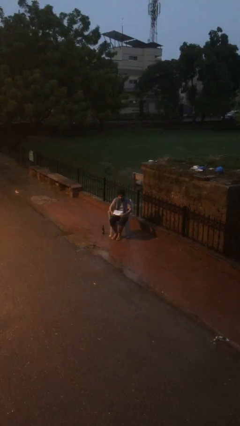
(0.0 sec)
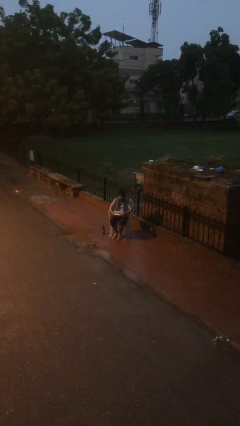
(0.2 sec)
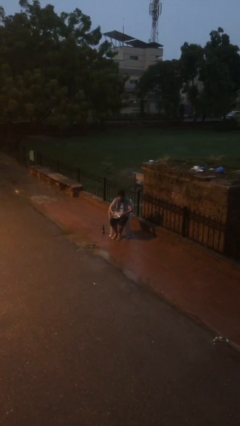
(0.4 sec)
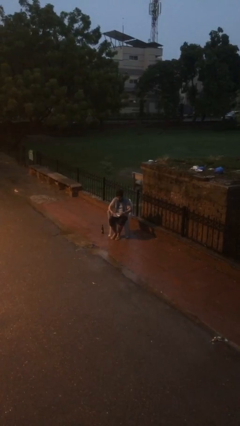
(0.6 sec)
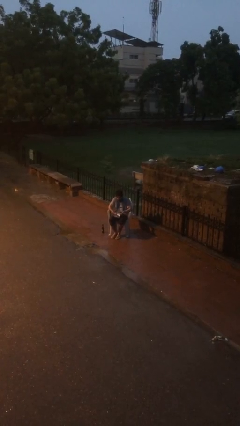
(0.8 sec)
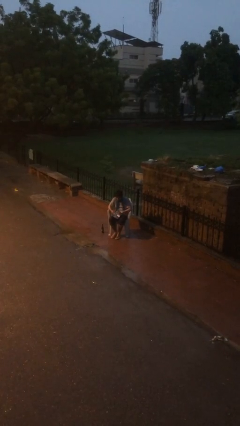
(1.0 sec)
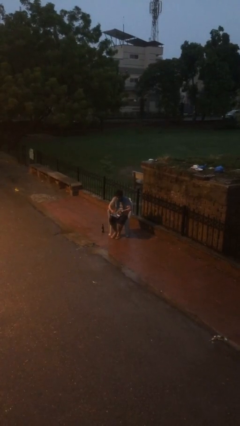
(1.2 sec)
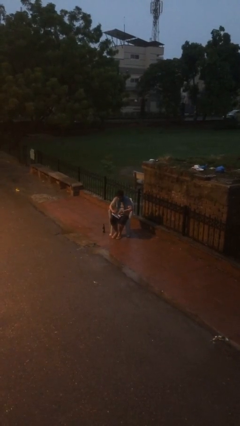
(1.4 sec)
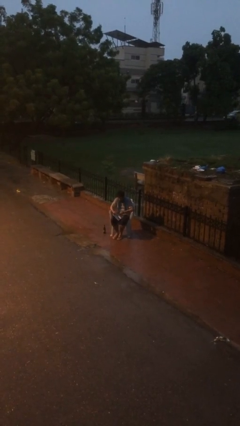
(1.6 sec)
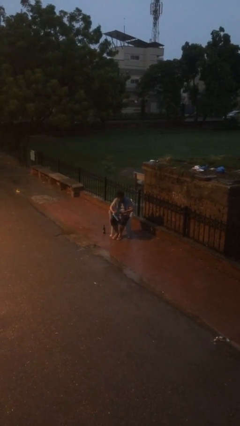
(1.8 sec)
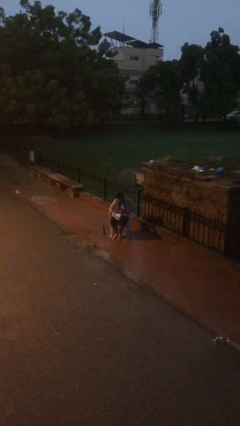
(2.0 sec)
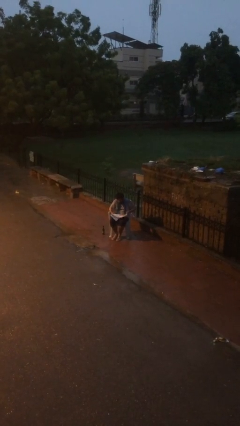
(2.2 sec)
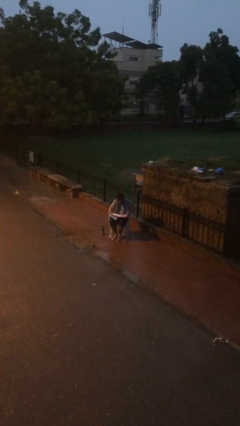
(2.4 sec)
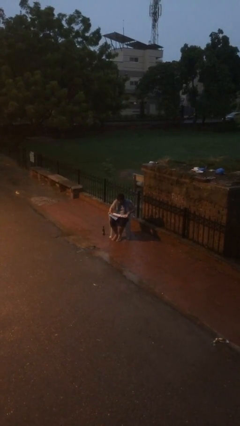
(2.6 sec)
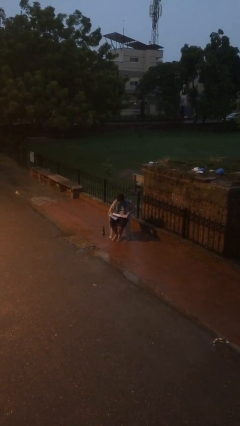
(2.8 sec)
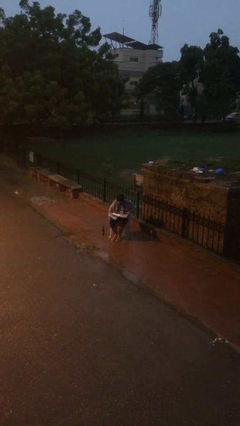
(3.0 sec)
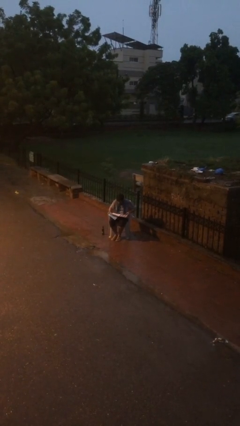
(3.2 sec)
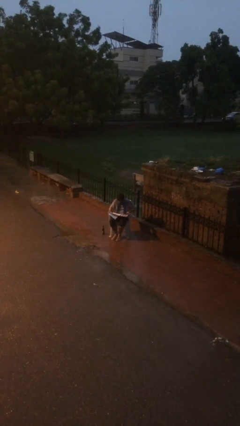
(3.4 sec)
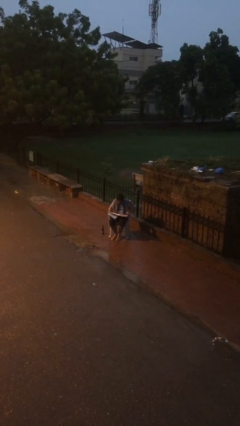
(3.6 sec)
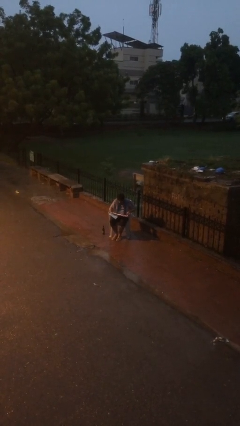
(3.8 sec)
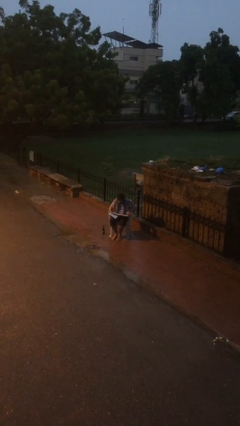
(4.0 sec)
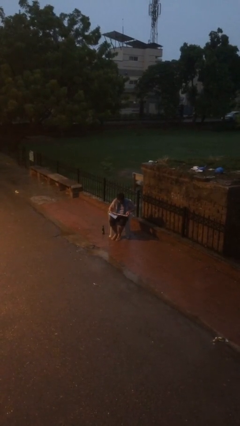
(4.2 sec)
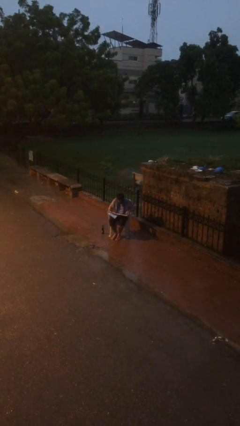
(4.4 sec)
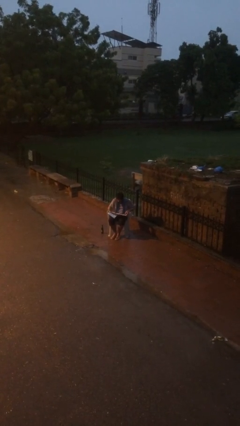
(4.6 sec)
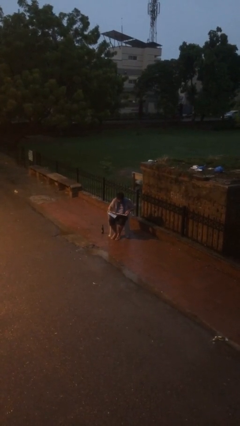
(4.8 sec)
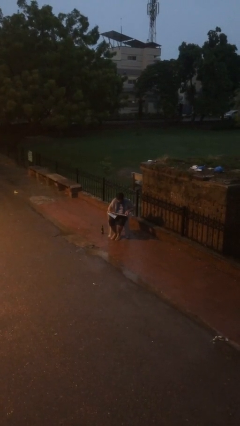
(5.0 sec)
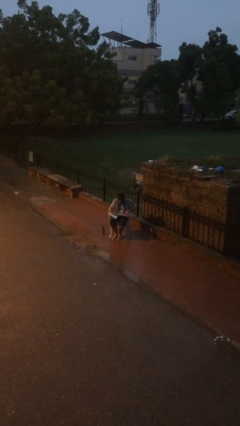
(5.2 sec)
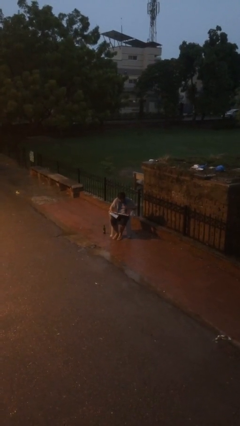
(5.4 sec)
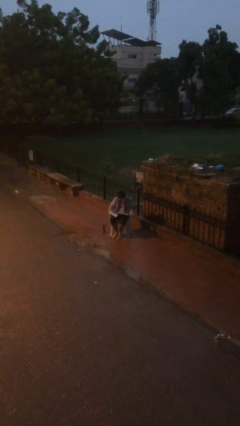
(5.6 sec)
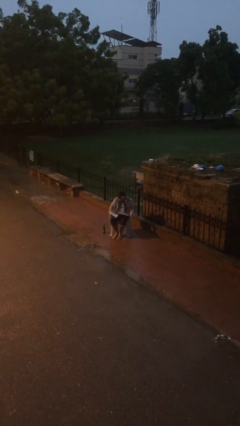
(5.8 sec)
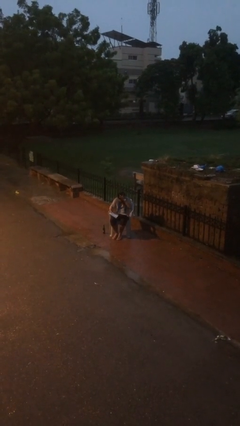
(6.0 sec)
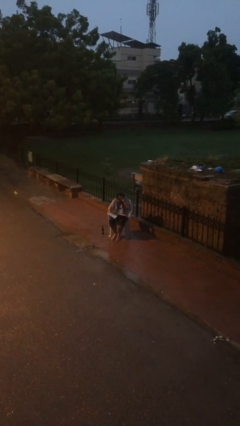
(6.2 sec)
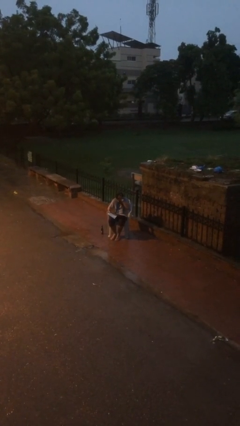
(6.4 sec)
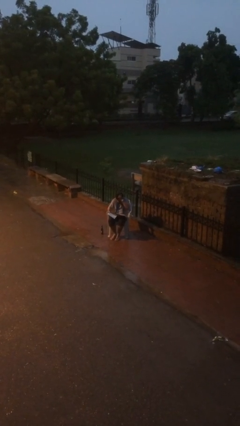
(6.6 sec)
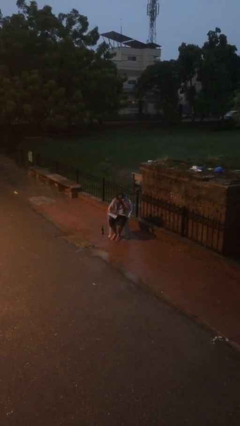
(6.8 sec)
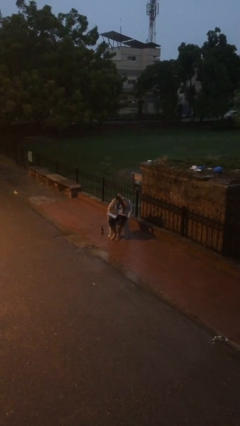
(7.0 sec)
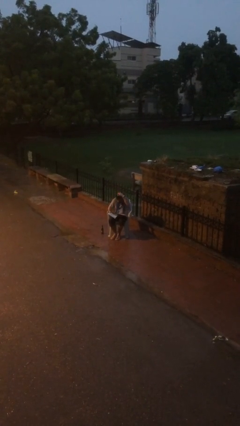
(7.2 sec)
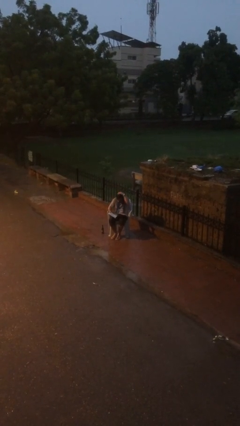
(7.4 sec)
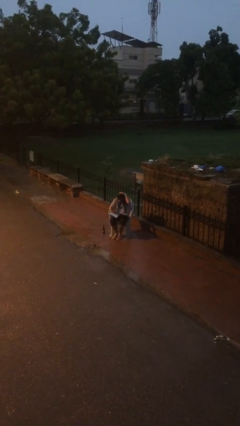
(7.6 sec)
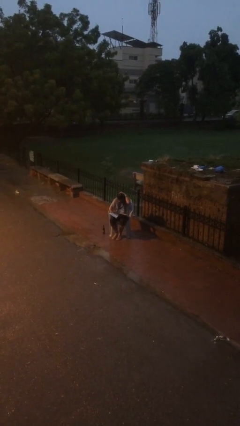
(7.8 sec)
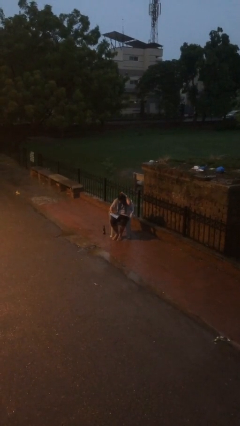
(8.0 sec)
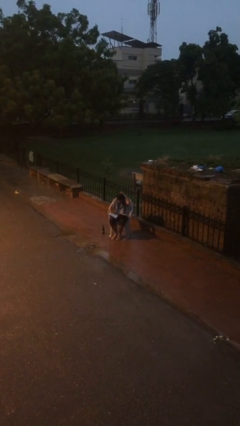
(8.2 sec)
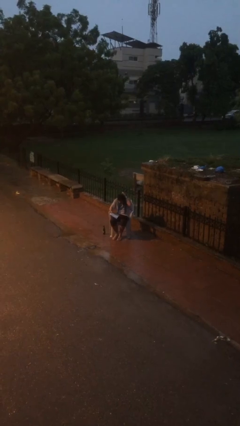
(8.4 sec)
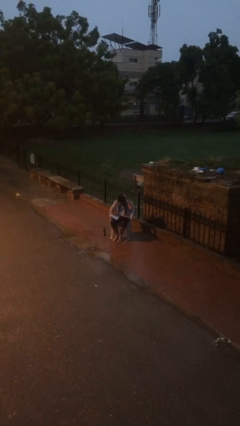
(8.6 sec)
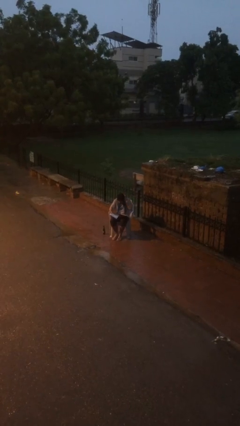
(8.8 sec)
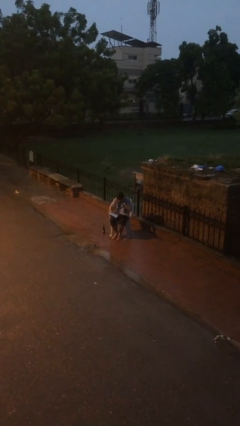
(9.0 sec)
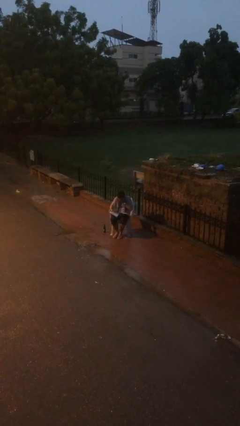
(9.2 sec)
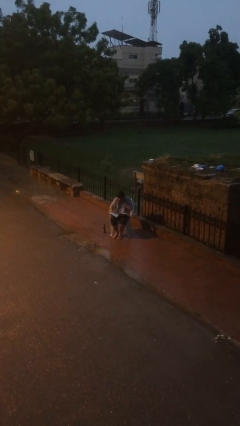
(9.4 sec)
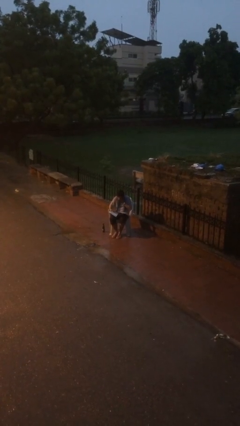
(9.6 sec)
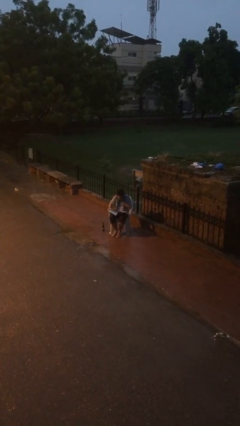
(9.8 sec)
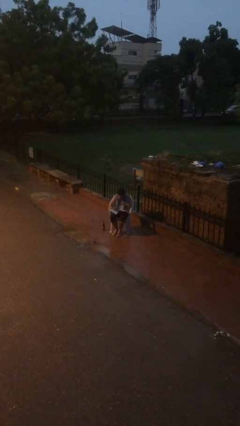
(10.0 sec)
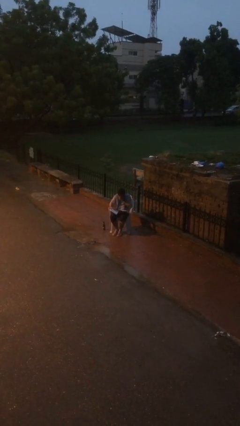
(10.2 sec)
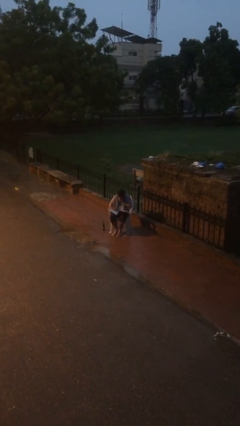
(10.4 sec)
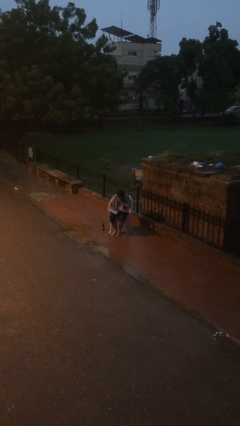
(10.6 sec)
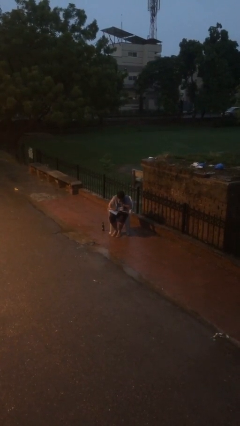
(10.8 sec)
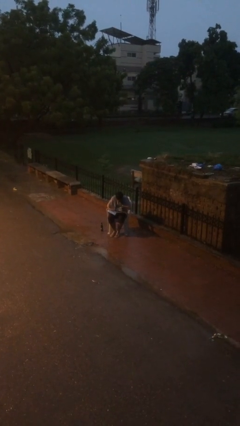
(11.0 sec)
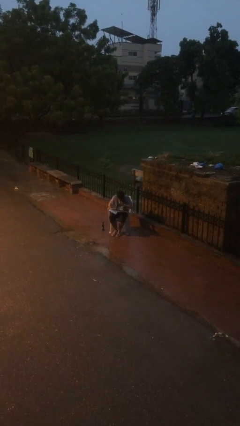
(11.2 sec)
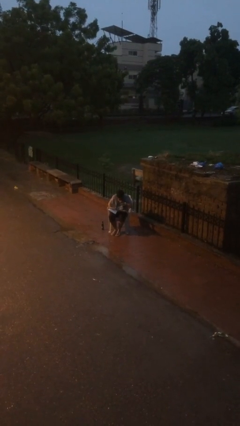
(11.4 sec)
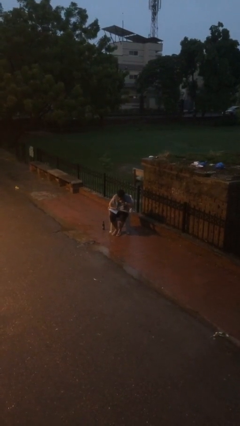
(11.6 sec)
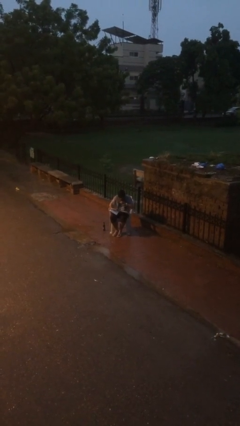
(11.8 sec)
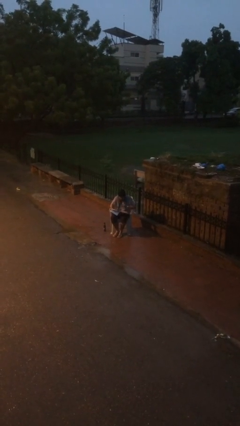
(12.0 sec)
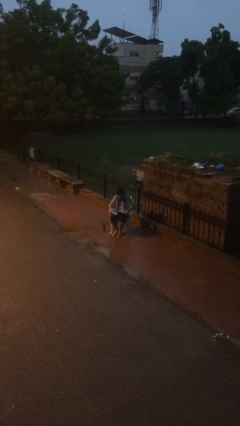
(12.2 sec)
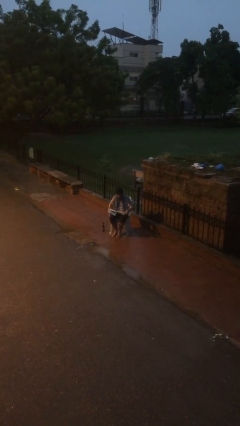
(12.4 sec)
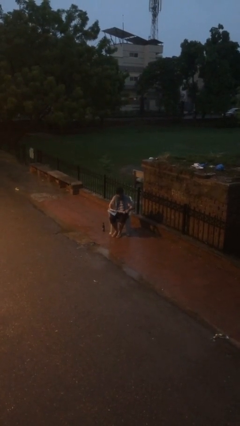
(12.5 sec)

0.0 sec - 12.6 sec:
person reads document

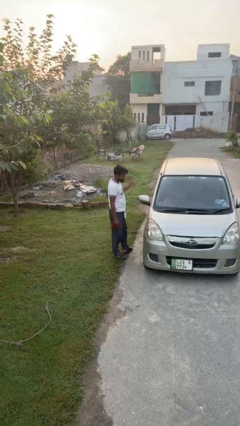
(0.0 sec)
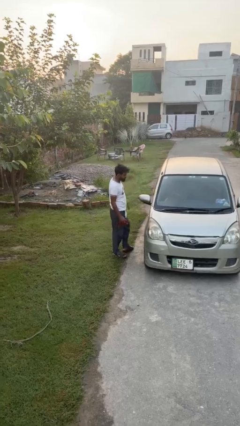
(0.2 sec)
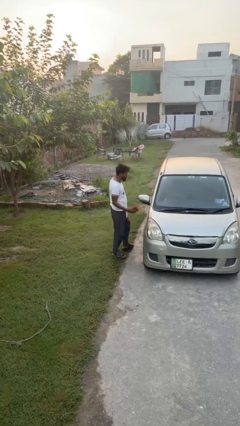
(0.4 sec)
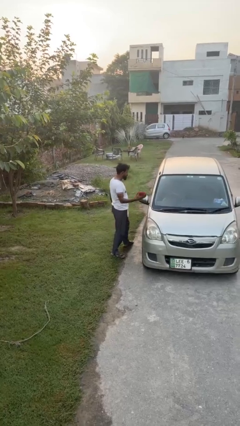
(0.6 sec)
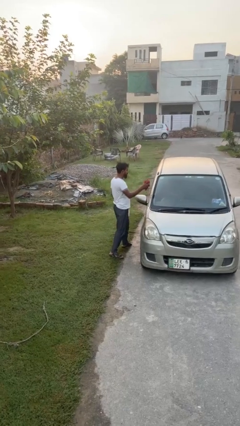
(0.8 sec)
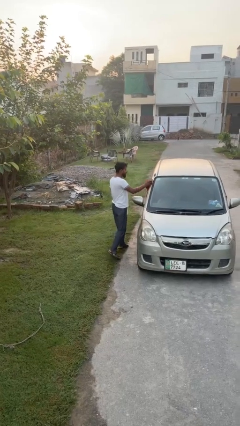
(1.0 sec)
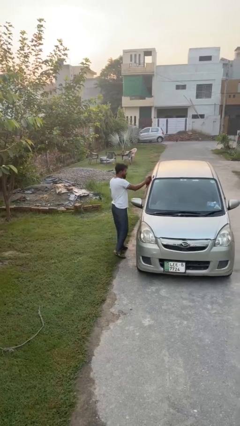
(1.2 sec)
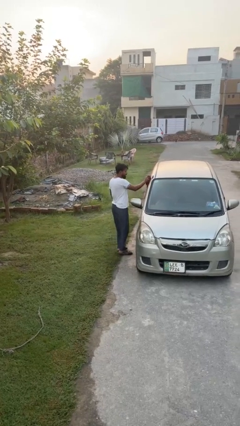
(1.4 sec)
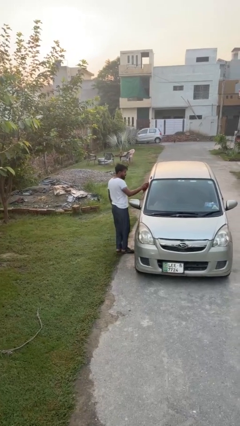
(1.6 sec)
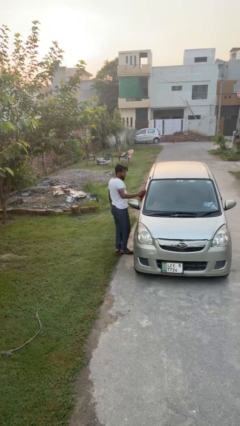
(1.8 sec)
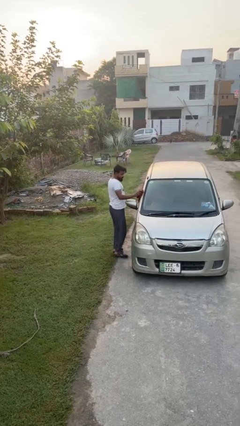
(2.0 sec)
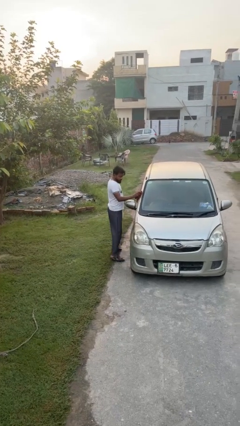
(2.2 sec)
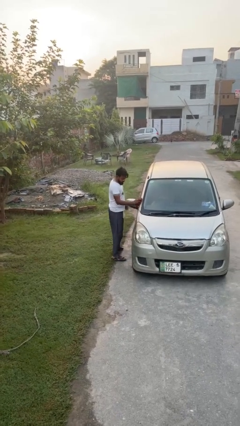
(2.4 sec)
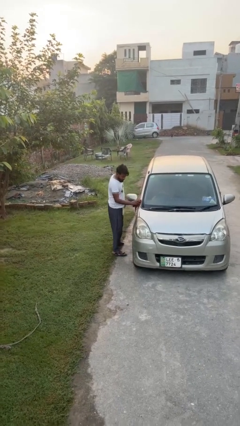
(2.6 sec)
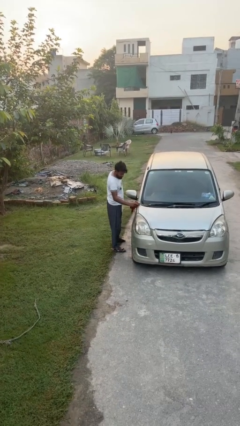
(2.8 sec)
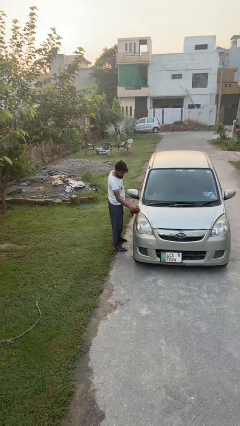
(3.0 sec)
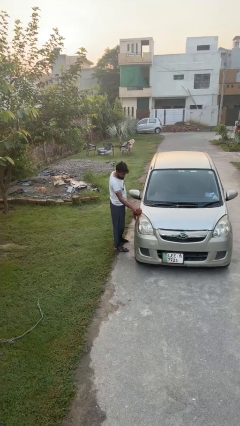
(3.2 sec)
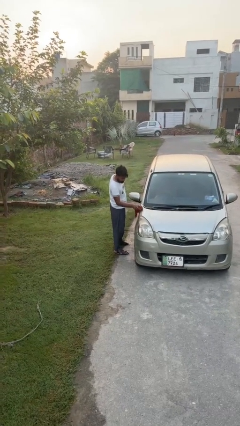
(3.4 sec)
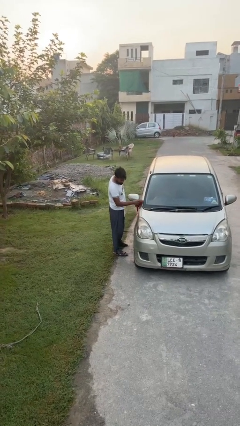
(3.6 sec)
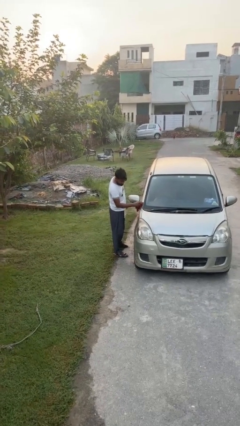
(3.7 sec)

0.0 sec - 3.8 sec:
person polishes car with rag

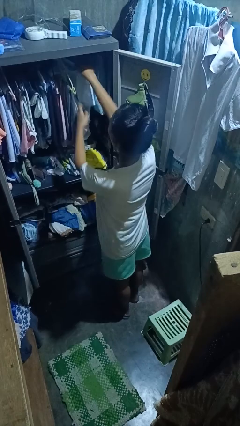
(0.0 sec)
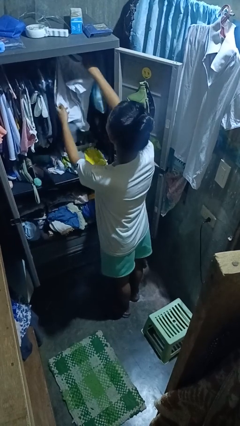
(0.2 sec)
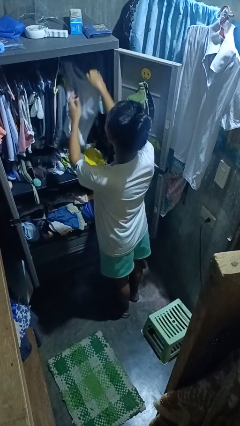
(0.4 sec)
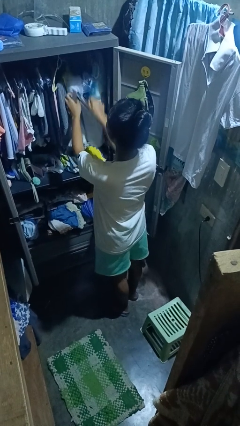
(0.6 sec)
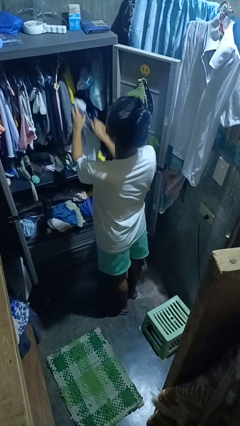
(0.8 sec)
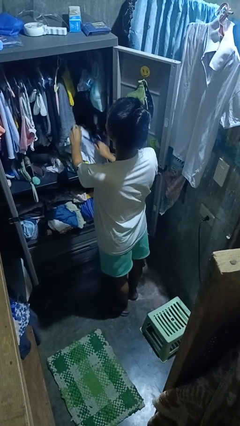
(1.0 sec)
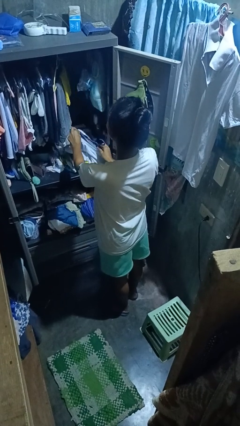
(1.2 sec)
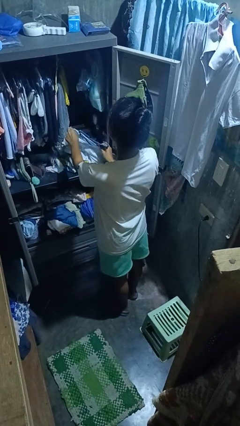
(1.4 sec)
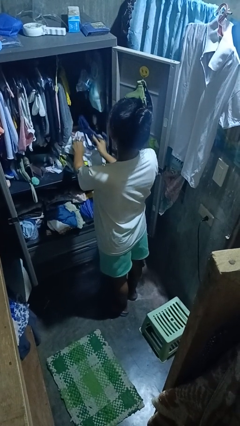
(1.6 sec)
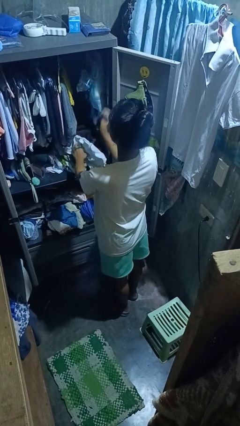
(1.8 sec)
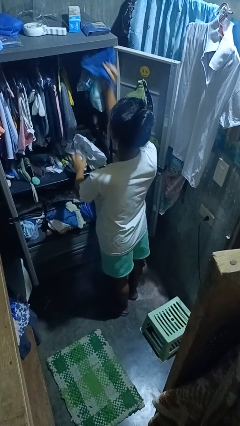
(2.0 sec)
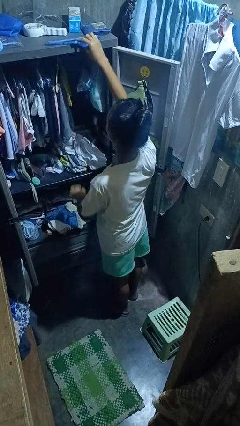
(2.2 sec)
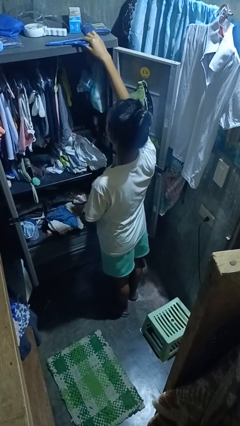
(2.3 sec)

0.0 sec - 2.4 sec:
person takes clothes from closet
